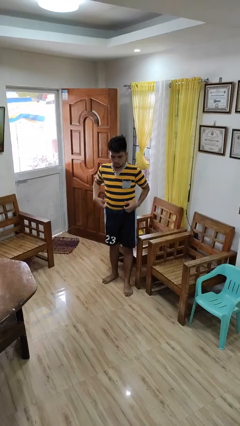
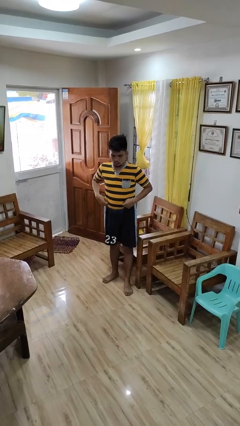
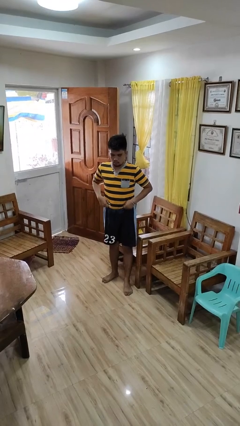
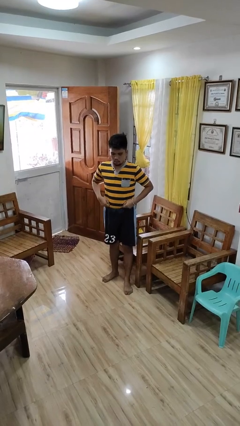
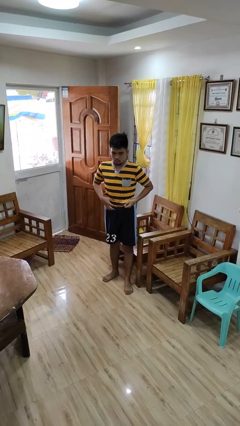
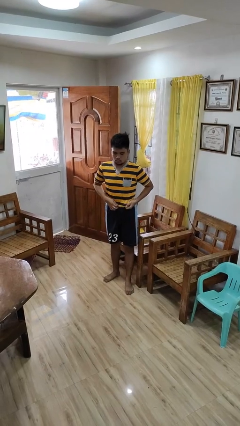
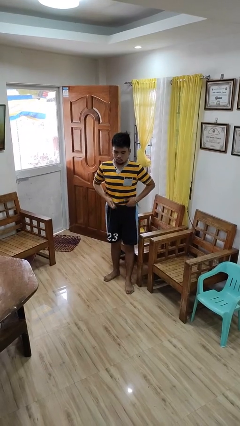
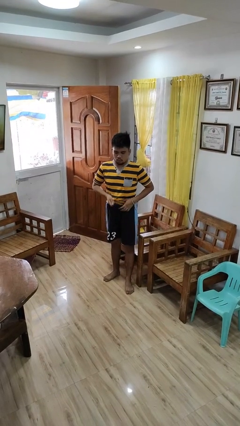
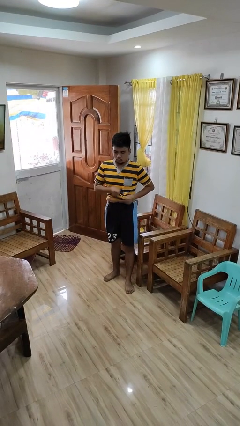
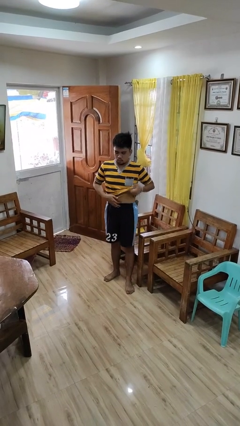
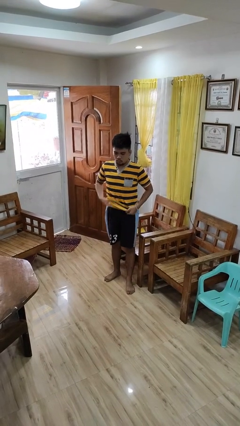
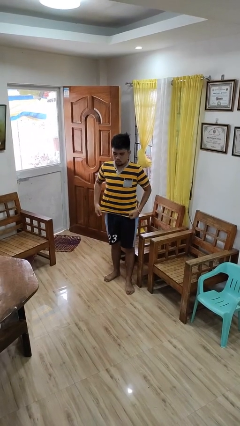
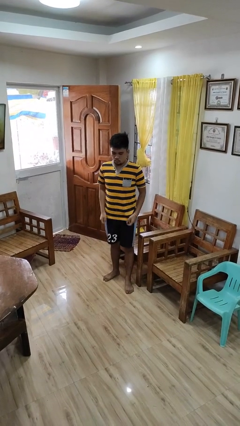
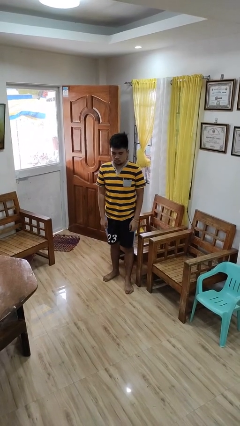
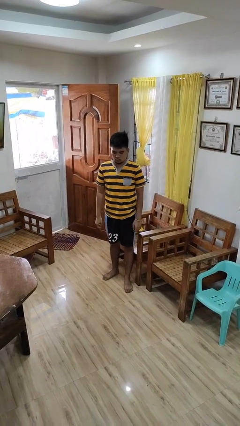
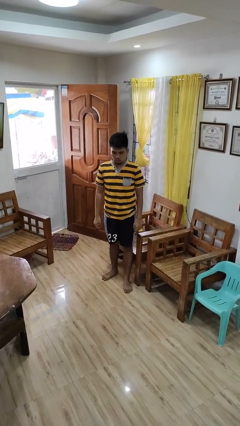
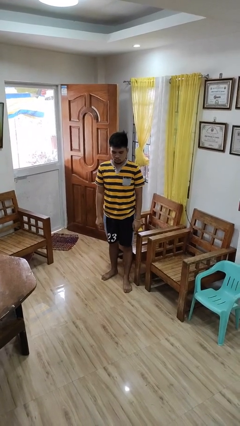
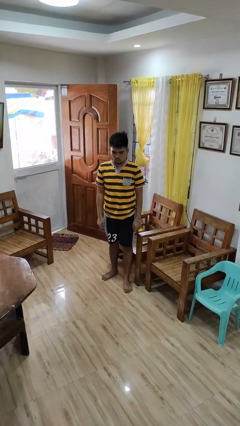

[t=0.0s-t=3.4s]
person untucks shirt

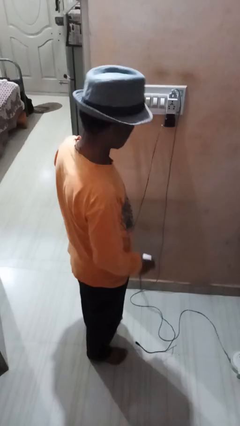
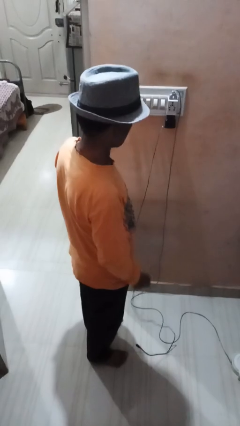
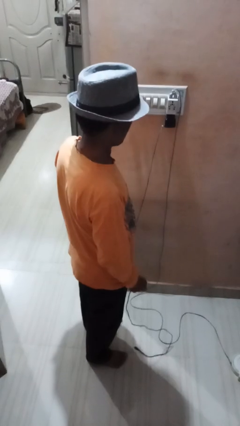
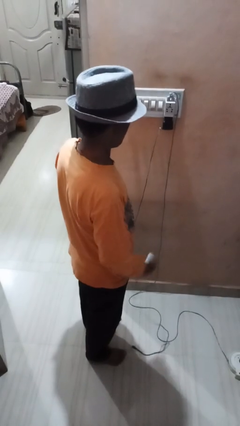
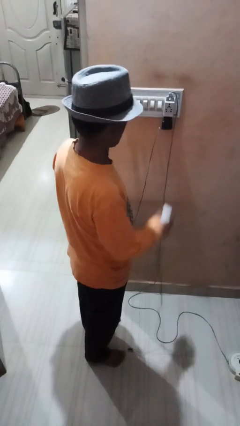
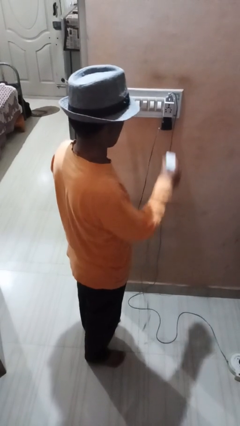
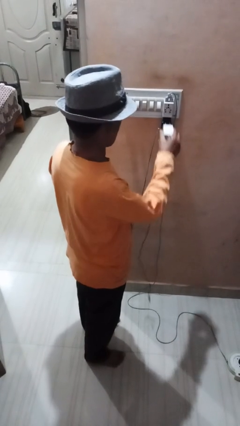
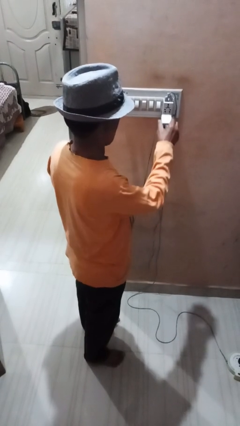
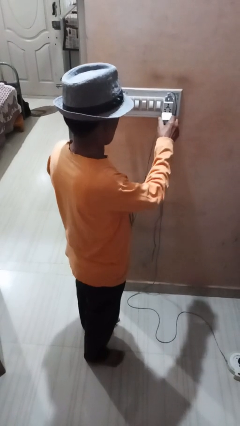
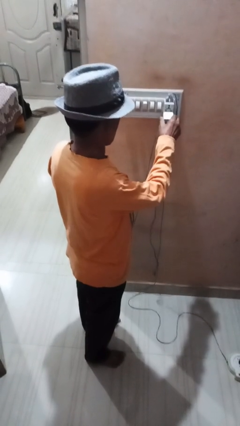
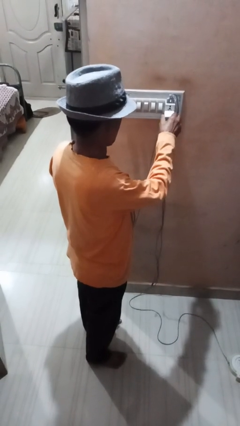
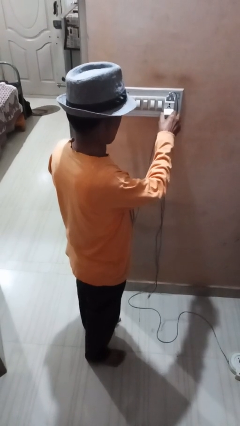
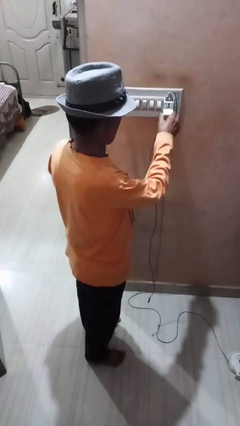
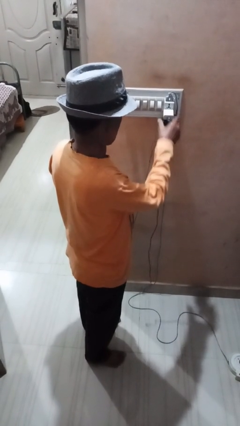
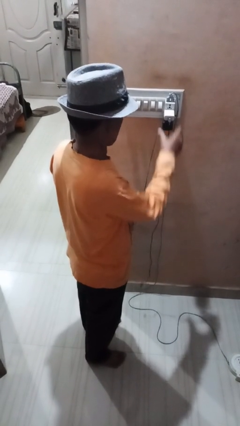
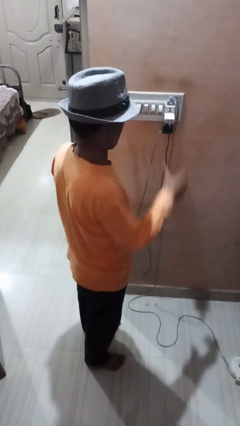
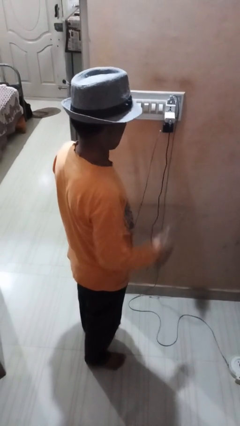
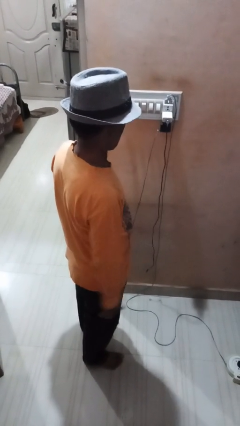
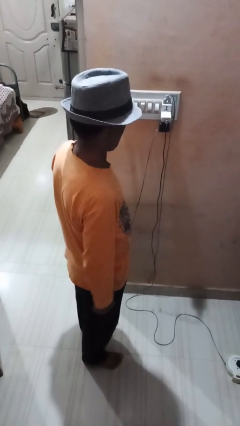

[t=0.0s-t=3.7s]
person plugs into electrical socket

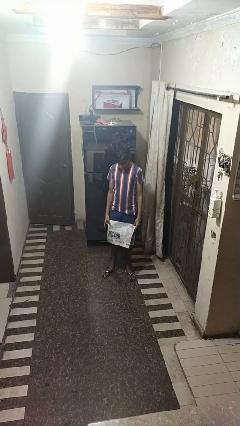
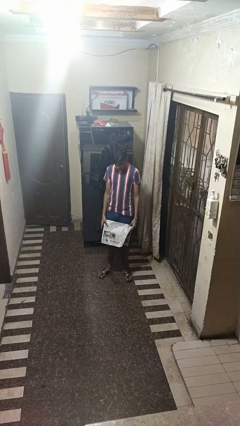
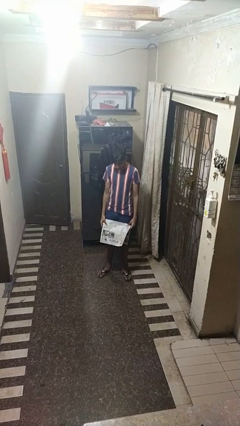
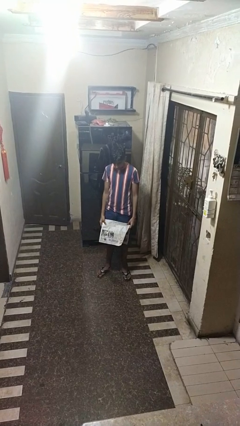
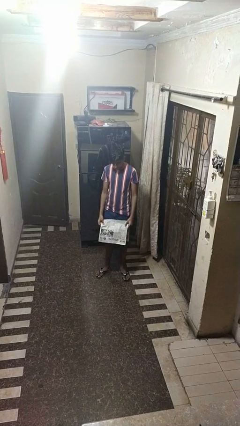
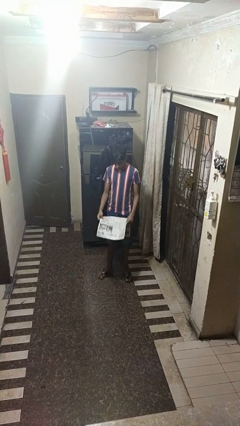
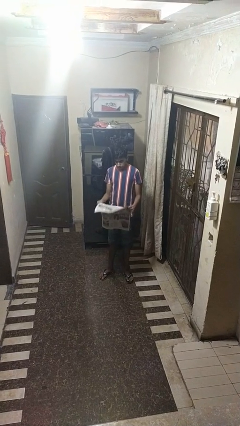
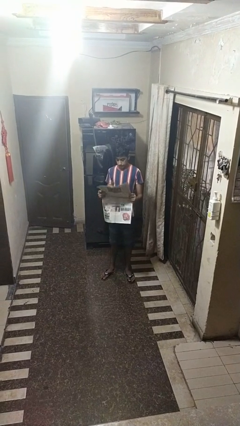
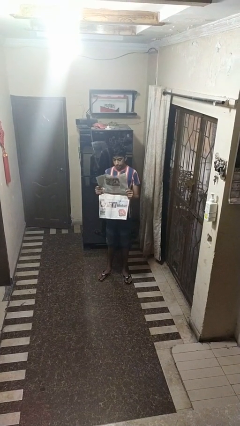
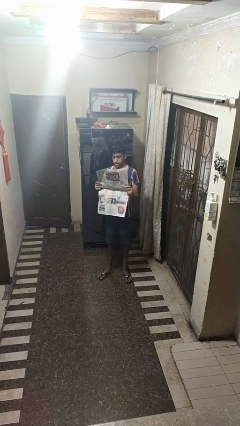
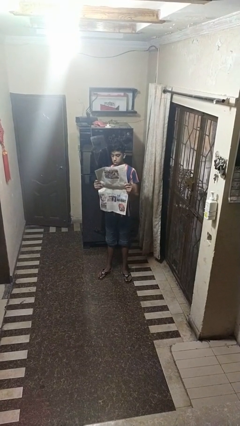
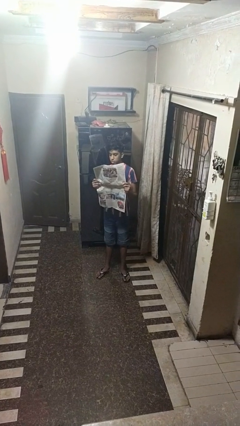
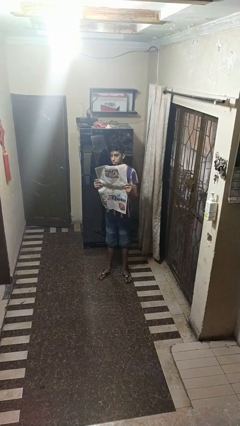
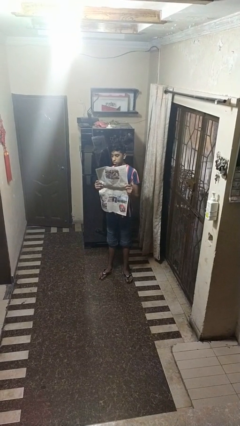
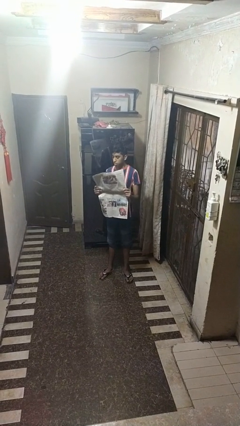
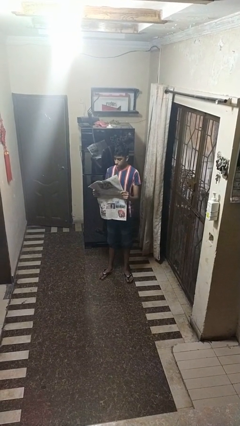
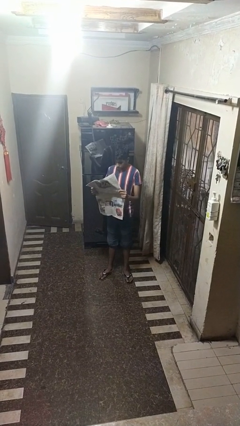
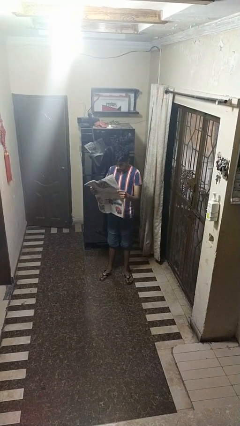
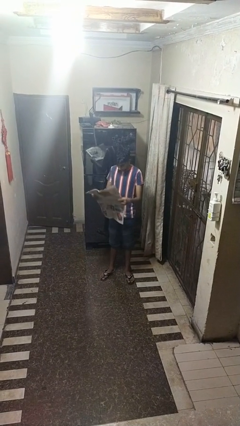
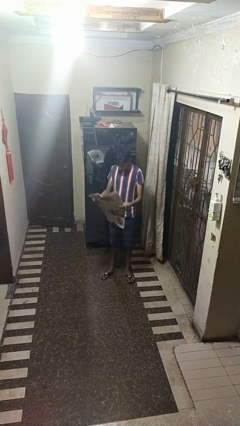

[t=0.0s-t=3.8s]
person reads newspaper

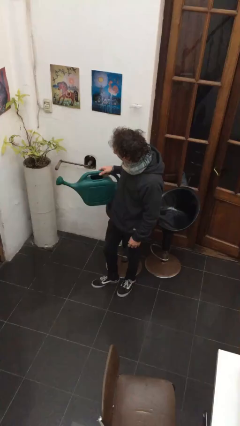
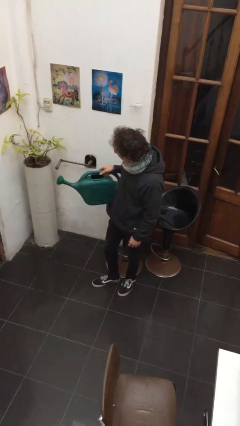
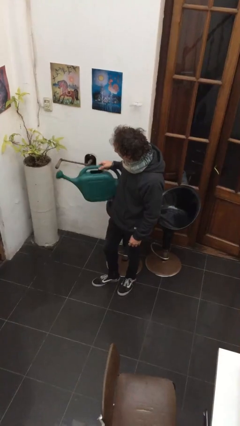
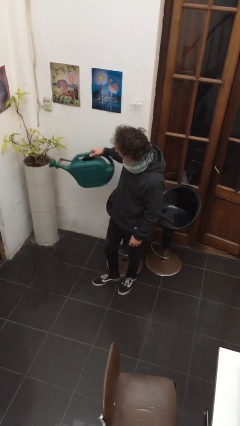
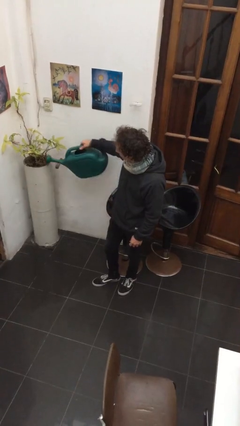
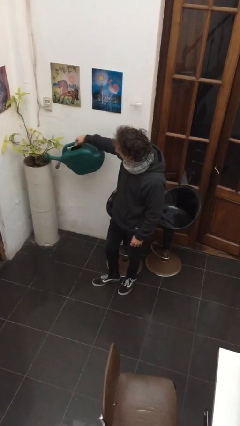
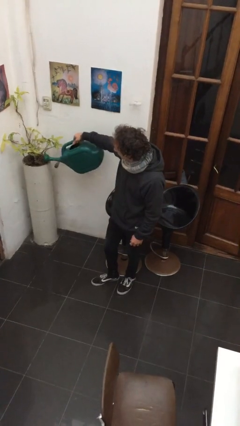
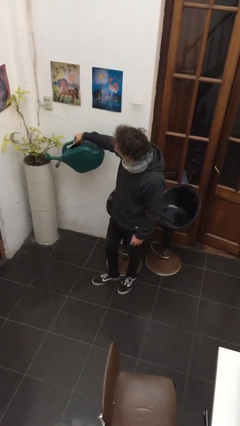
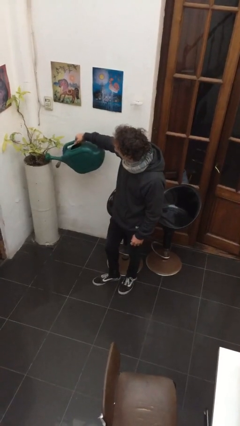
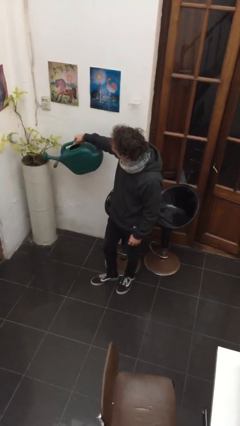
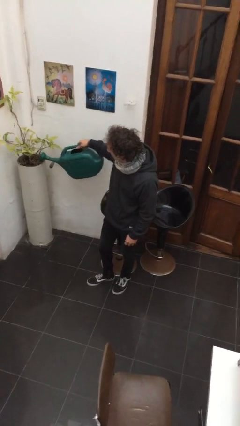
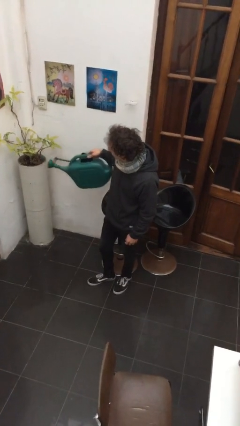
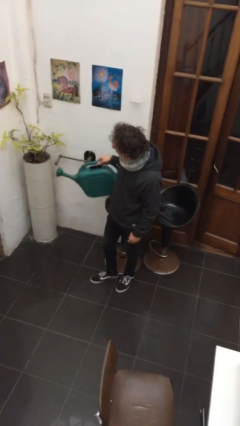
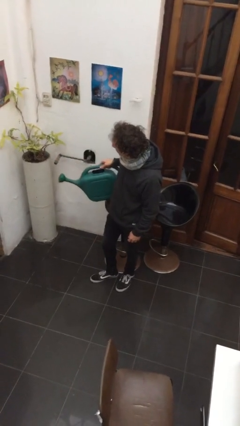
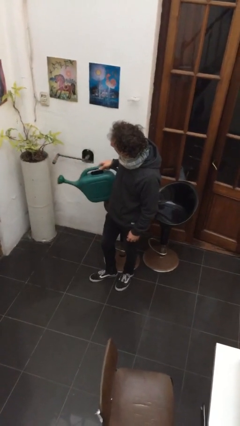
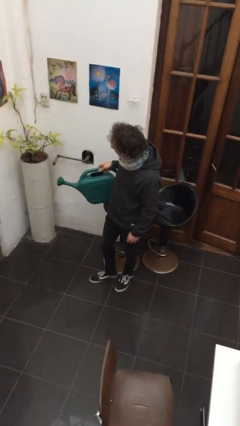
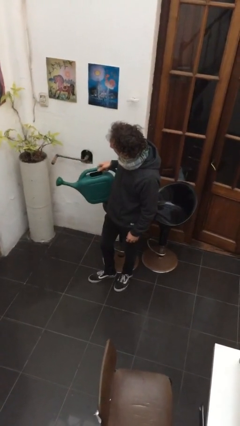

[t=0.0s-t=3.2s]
person waters houseplant

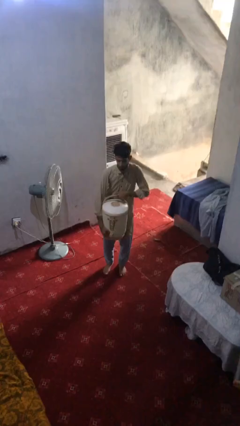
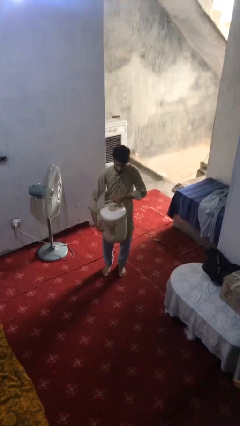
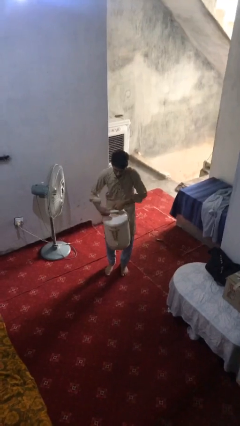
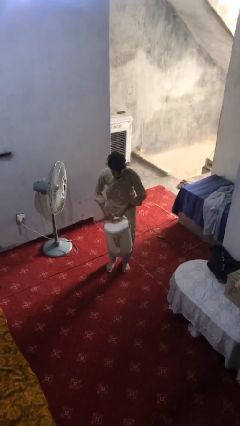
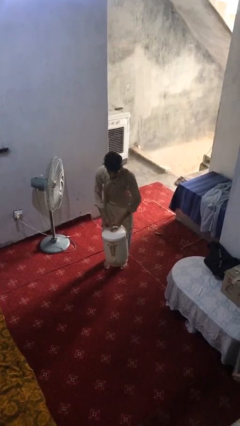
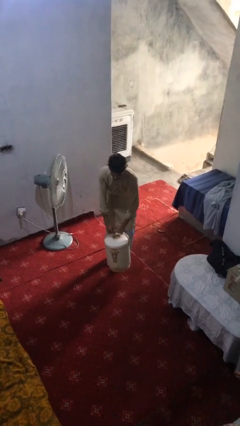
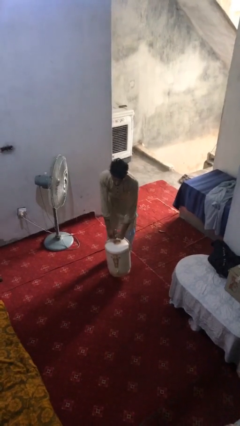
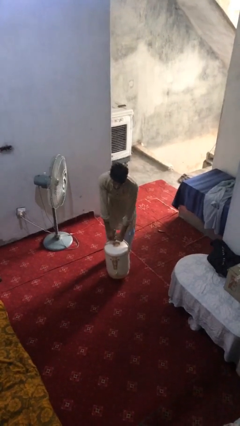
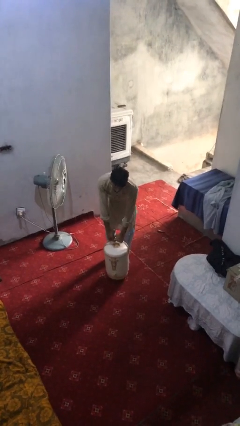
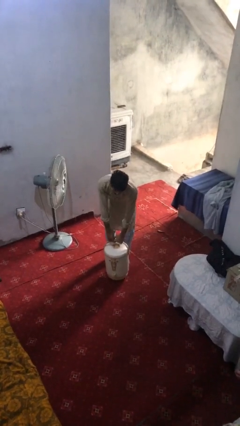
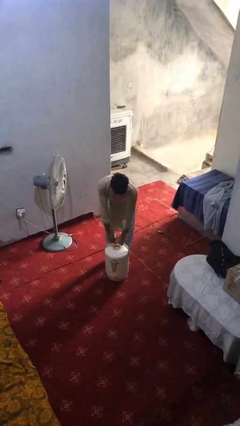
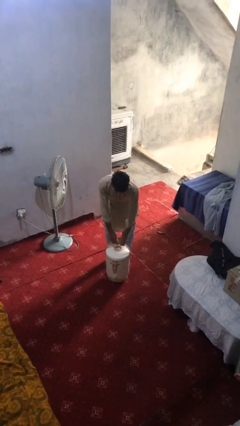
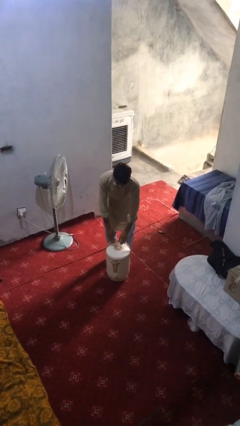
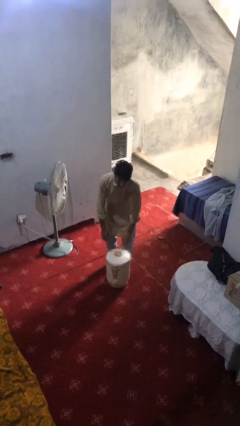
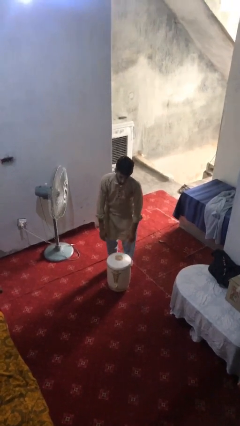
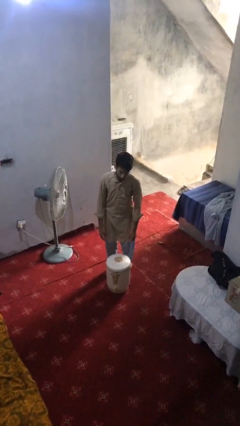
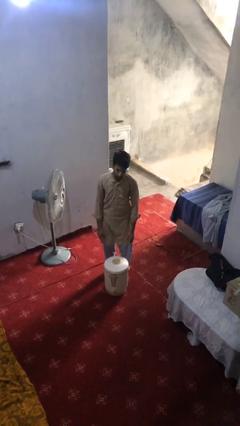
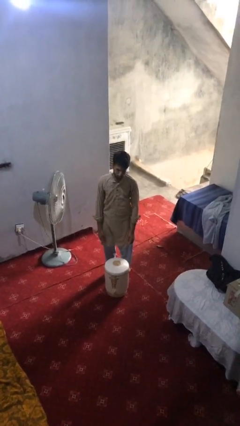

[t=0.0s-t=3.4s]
person puts down object on floor
